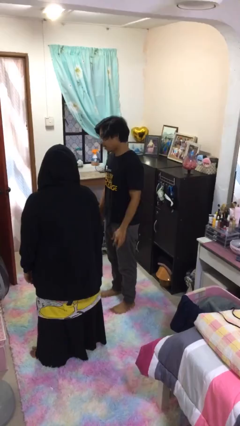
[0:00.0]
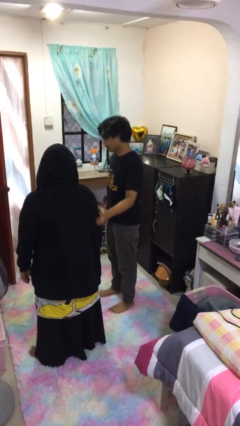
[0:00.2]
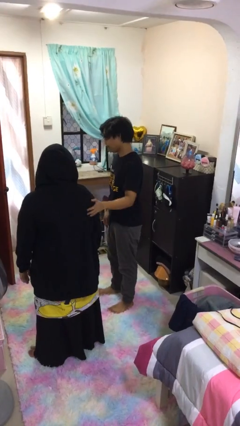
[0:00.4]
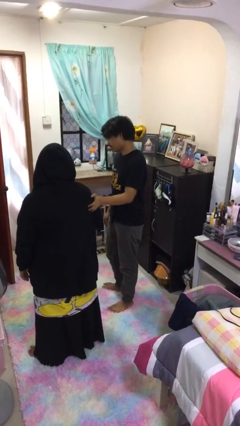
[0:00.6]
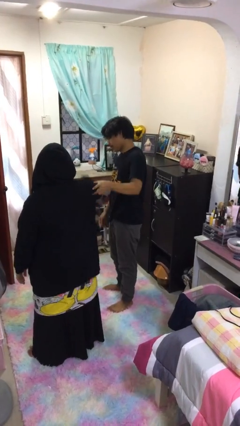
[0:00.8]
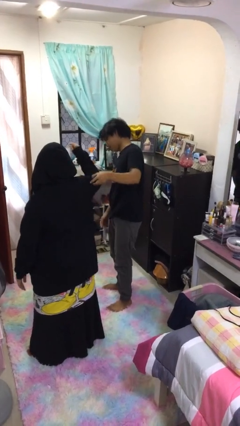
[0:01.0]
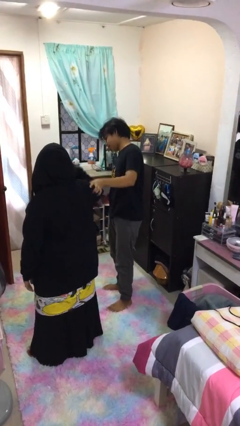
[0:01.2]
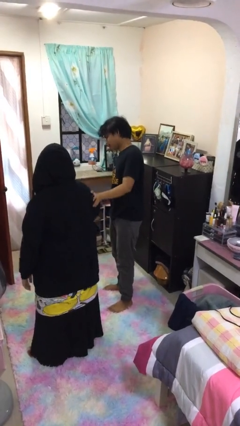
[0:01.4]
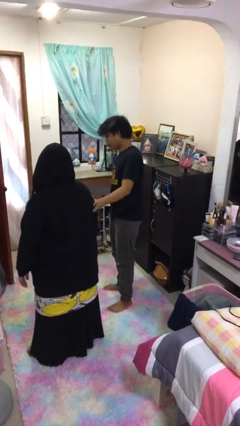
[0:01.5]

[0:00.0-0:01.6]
person grabs person by bicep

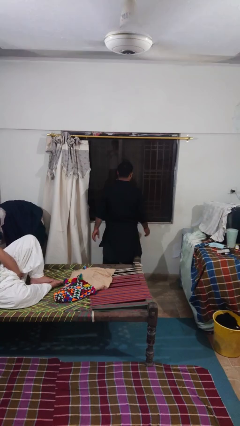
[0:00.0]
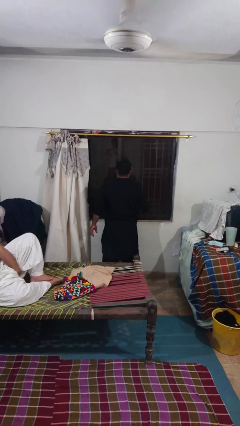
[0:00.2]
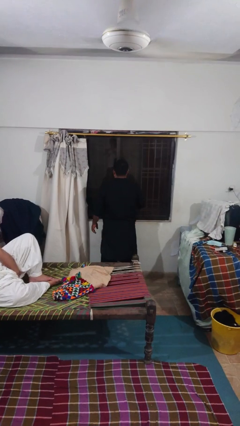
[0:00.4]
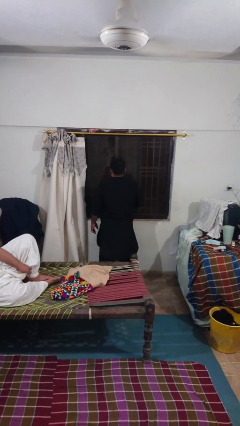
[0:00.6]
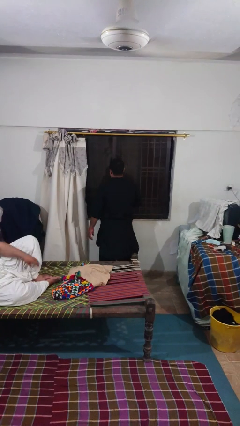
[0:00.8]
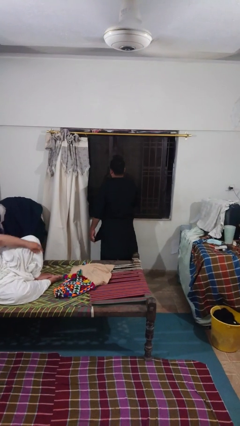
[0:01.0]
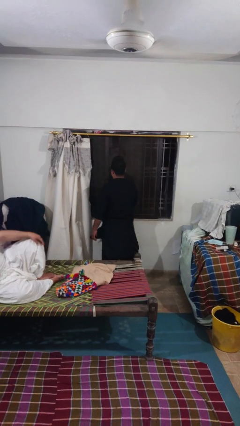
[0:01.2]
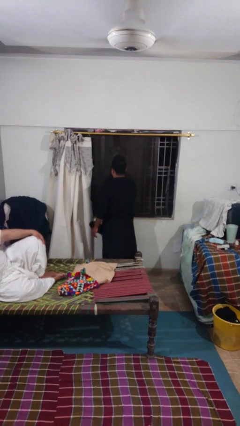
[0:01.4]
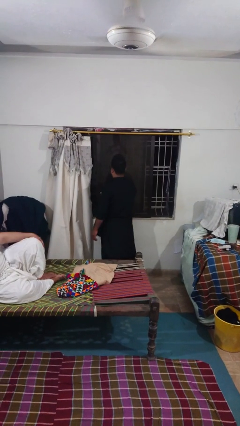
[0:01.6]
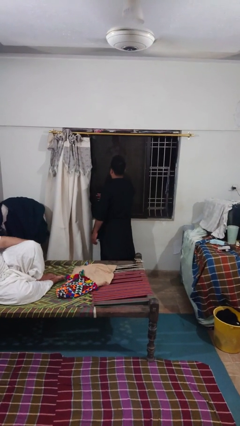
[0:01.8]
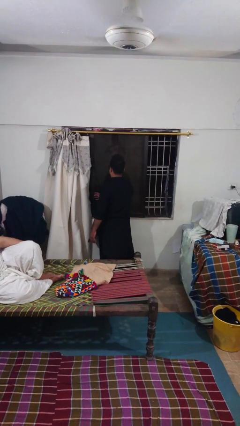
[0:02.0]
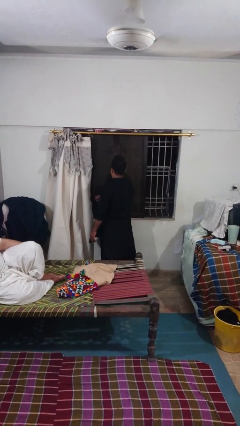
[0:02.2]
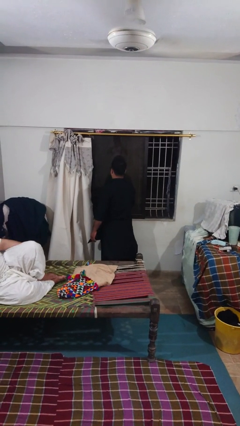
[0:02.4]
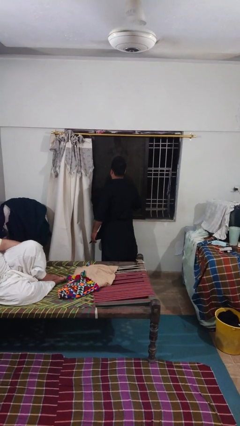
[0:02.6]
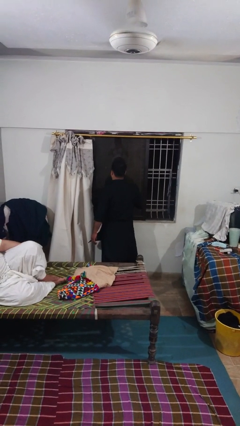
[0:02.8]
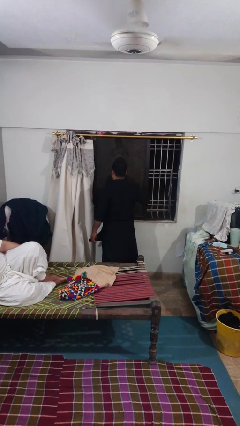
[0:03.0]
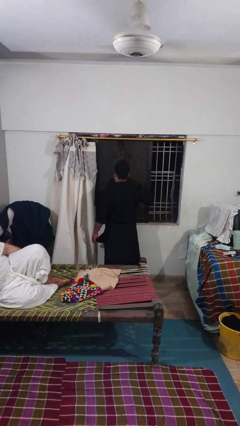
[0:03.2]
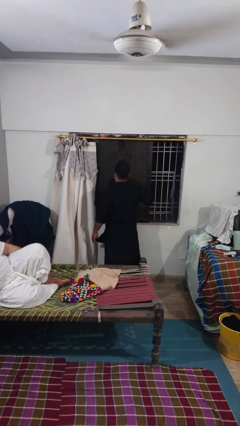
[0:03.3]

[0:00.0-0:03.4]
person opens sliding door

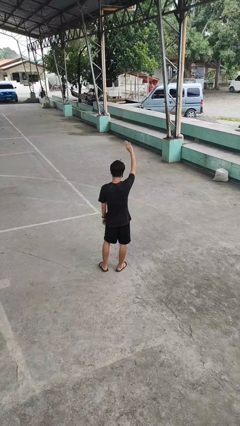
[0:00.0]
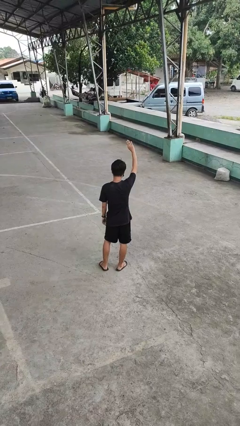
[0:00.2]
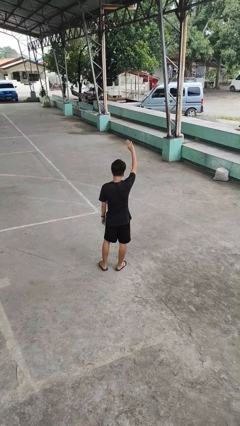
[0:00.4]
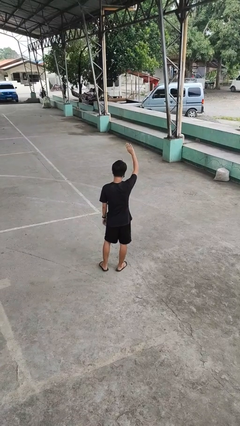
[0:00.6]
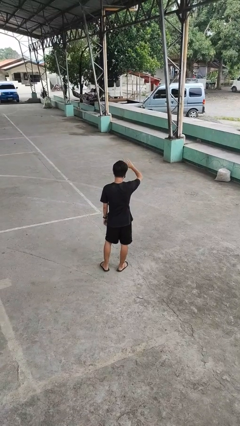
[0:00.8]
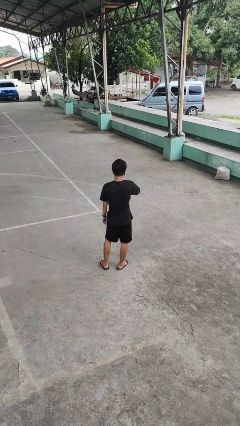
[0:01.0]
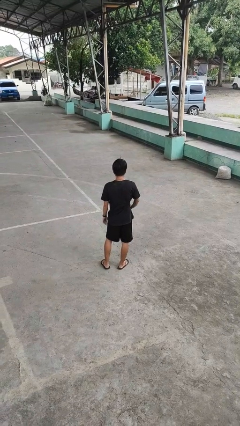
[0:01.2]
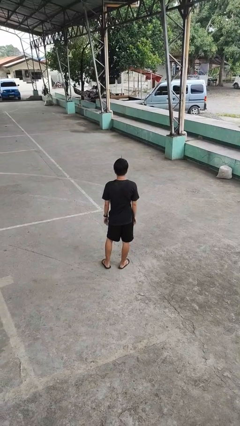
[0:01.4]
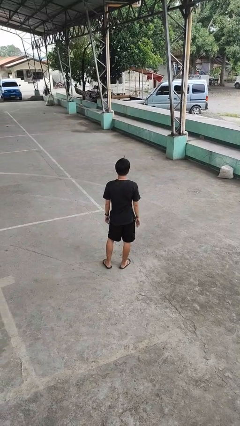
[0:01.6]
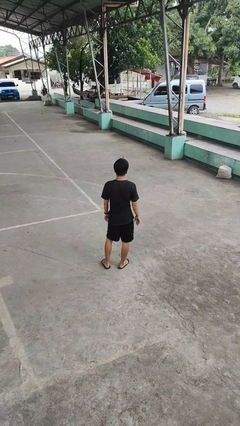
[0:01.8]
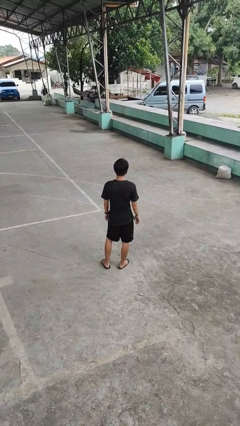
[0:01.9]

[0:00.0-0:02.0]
person gestures swipe down

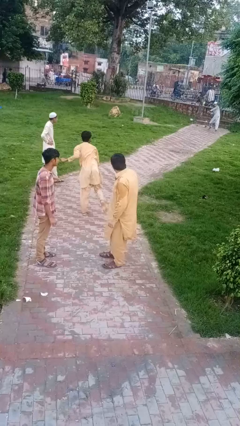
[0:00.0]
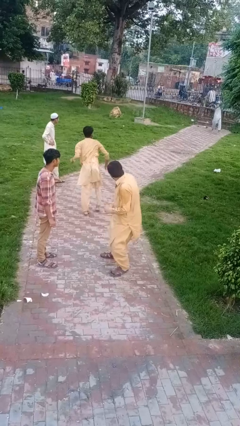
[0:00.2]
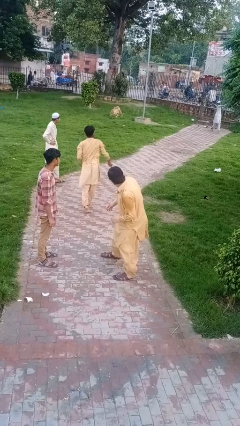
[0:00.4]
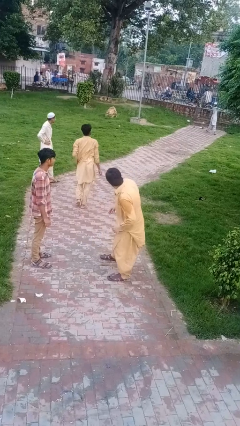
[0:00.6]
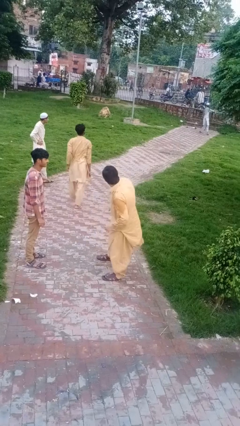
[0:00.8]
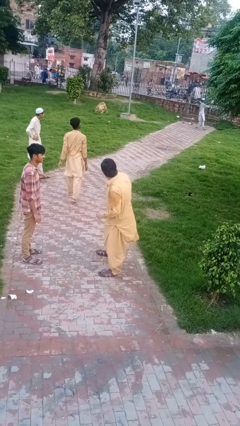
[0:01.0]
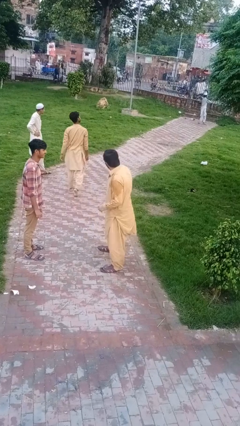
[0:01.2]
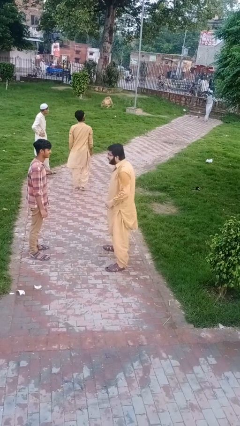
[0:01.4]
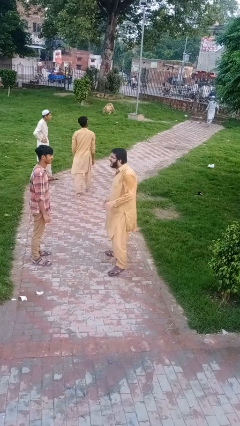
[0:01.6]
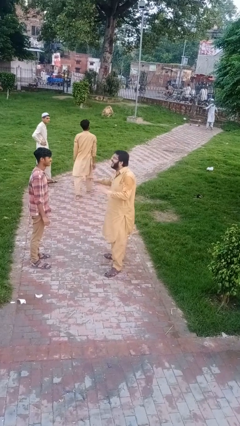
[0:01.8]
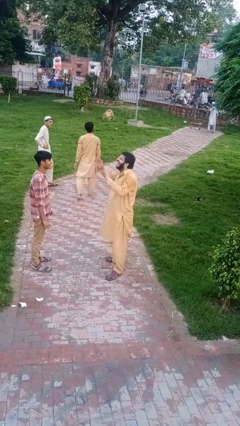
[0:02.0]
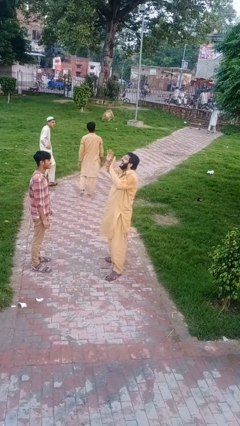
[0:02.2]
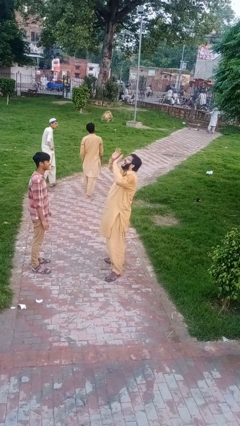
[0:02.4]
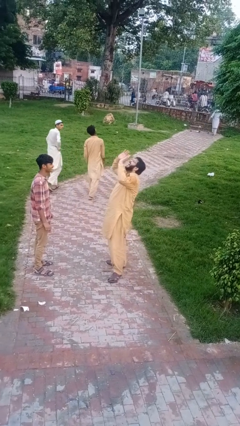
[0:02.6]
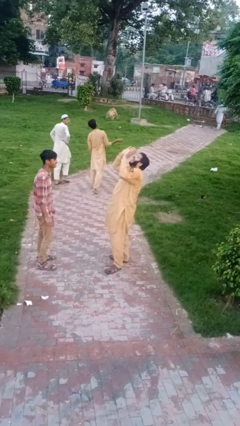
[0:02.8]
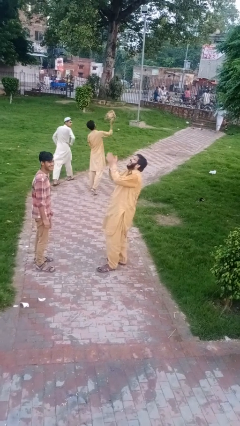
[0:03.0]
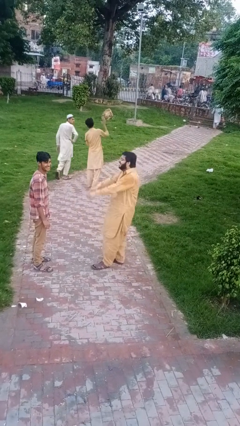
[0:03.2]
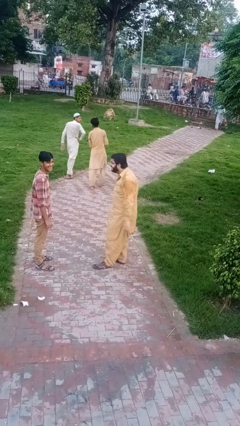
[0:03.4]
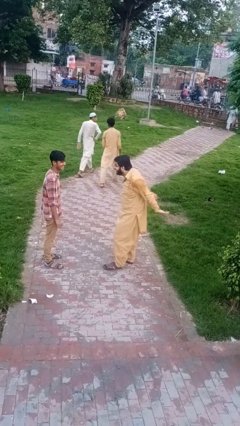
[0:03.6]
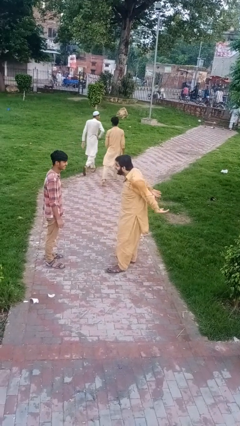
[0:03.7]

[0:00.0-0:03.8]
person laughs with person

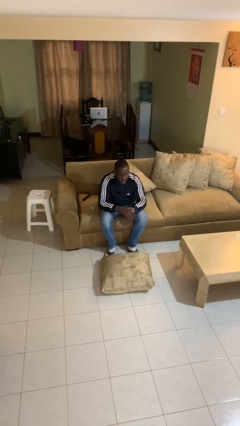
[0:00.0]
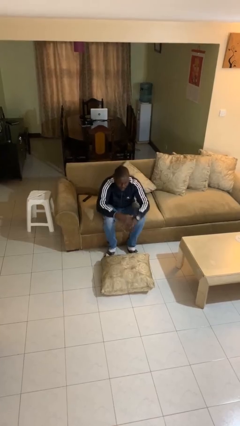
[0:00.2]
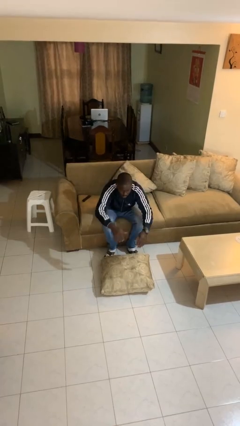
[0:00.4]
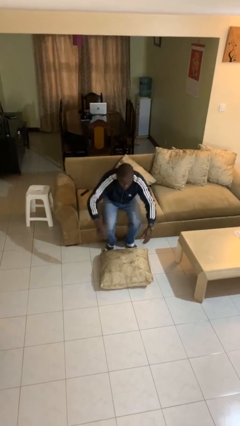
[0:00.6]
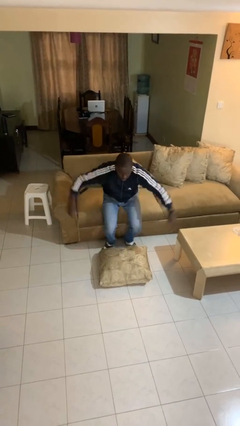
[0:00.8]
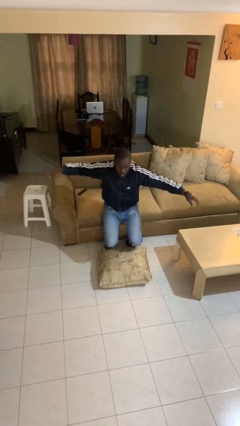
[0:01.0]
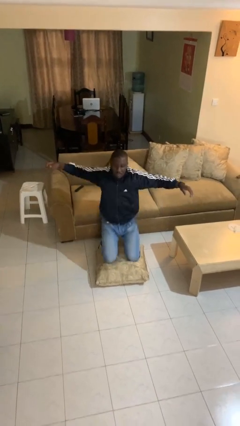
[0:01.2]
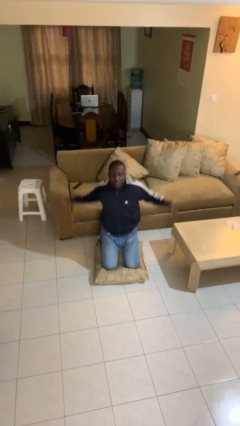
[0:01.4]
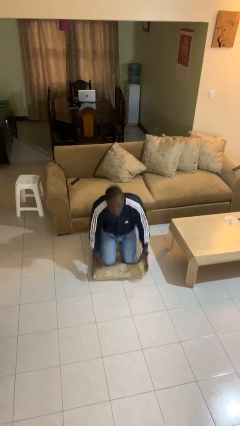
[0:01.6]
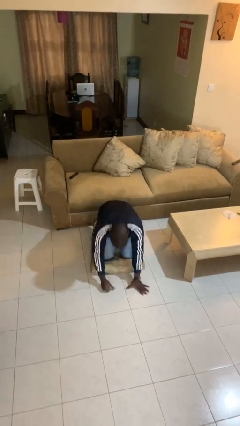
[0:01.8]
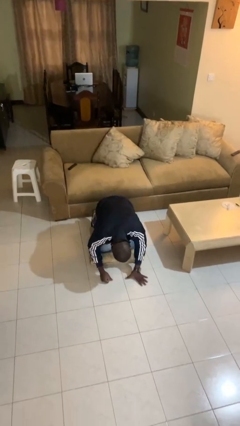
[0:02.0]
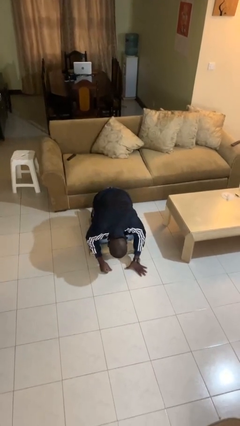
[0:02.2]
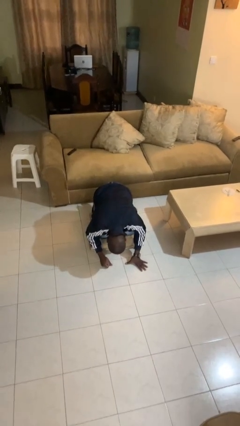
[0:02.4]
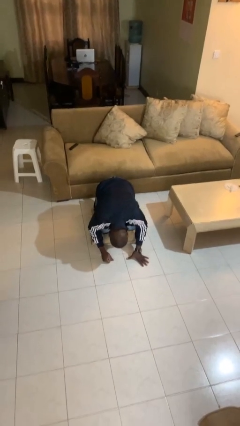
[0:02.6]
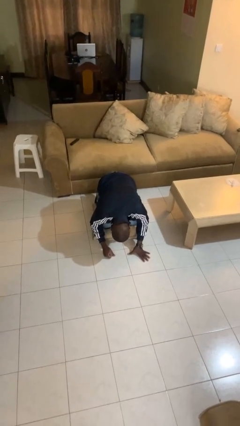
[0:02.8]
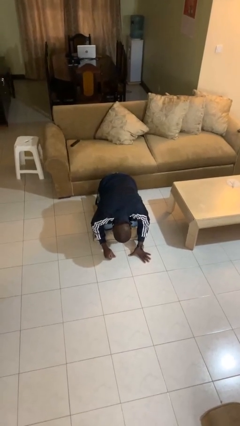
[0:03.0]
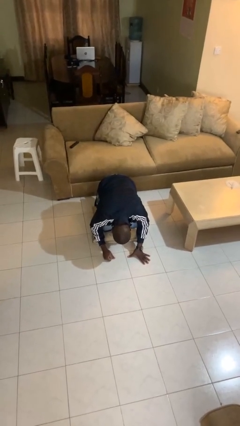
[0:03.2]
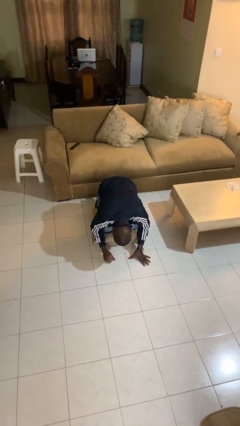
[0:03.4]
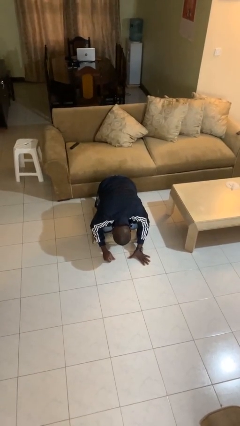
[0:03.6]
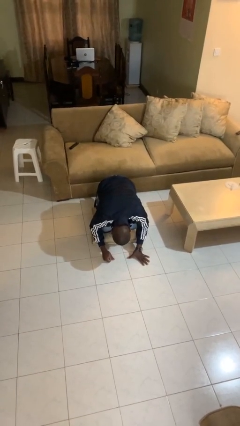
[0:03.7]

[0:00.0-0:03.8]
person falls from chair

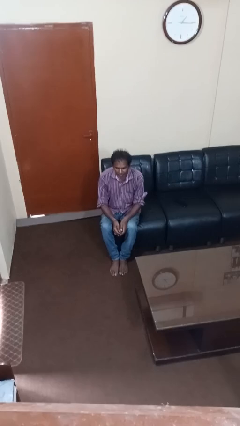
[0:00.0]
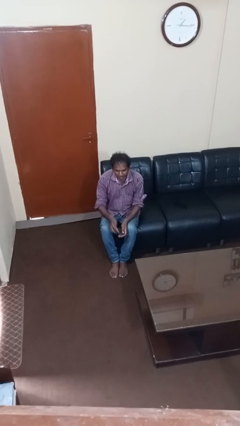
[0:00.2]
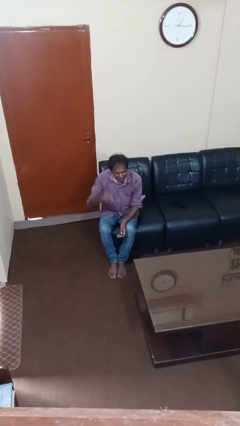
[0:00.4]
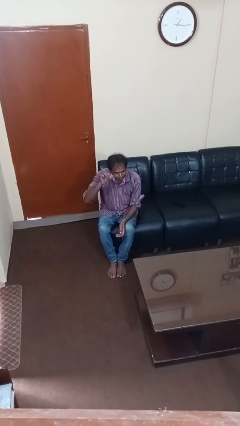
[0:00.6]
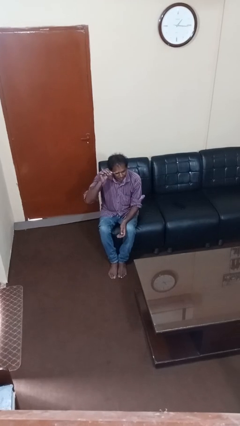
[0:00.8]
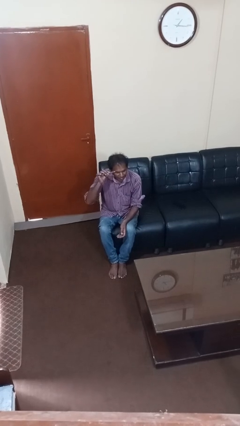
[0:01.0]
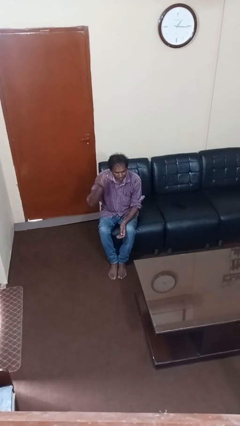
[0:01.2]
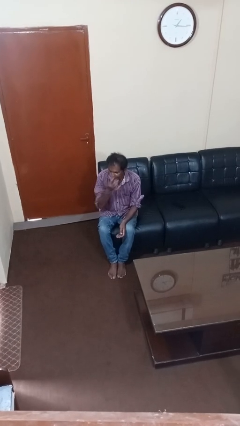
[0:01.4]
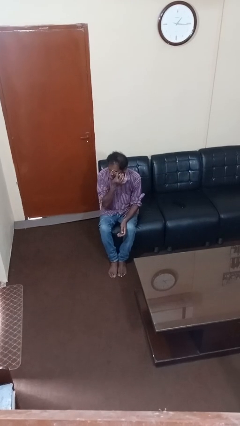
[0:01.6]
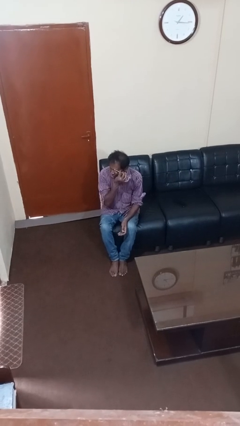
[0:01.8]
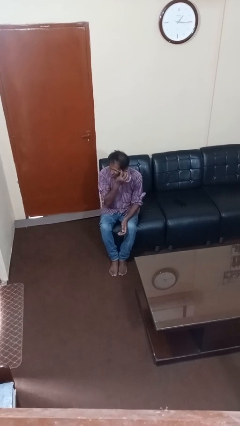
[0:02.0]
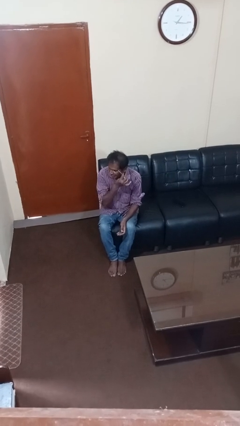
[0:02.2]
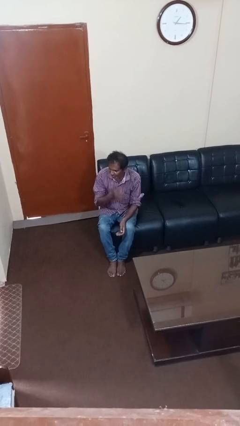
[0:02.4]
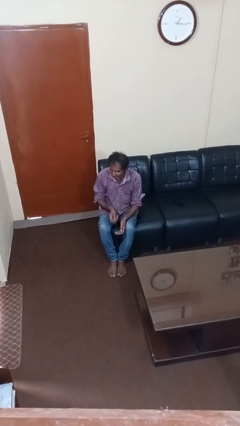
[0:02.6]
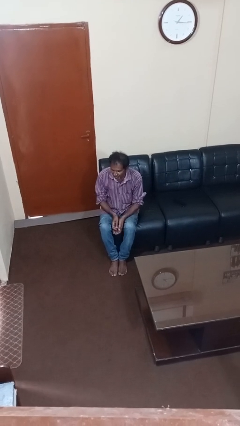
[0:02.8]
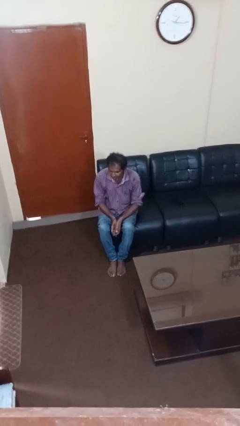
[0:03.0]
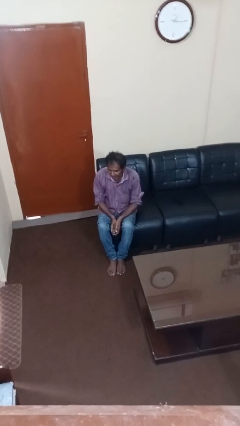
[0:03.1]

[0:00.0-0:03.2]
person applies eye makeup
